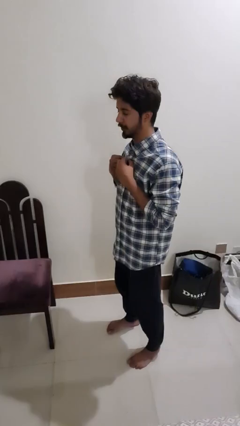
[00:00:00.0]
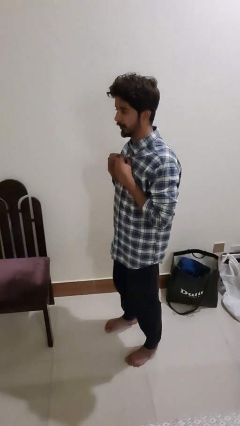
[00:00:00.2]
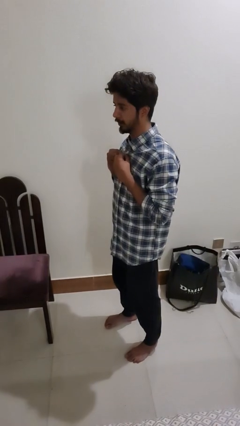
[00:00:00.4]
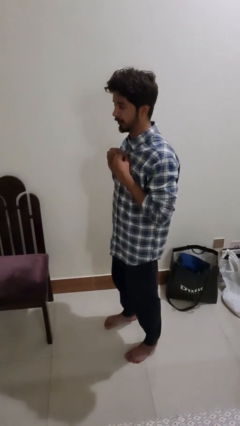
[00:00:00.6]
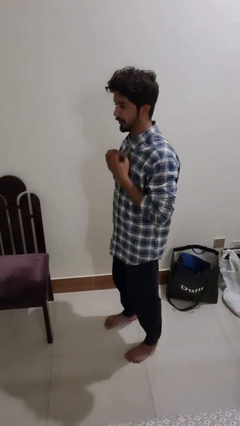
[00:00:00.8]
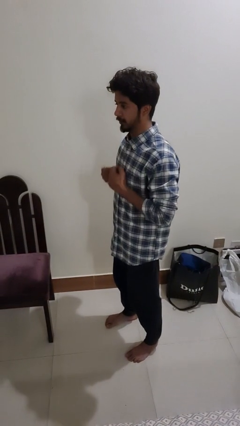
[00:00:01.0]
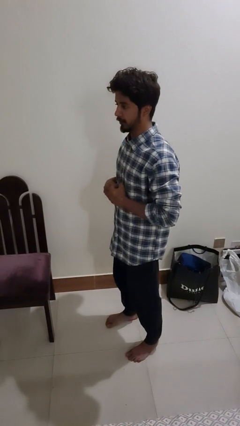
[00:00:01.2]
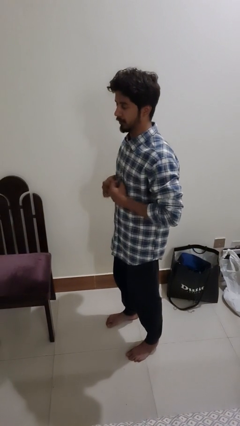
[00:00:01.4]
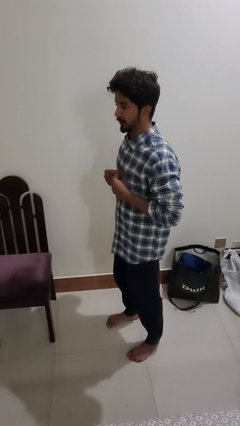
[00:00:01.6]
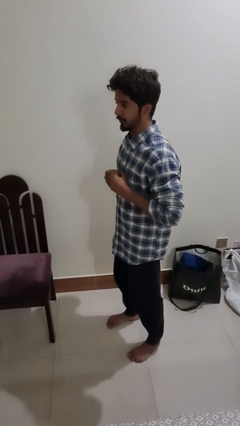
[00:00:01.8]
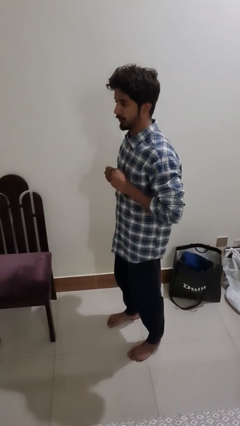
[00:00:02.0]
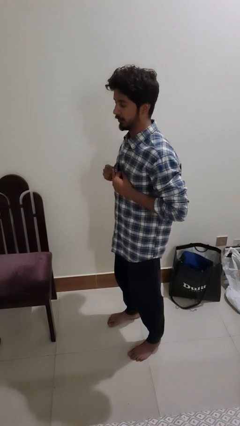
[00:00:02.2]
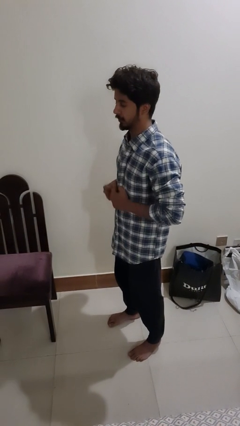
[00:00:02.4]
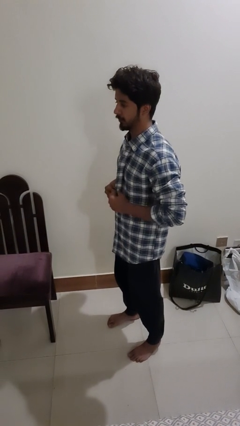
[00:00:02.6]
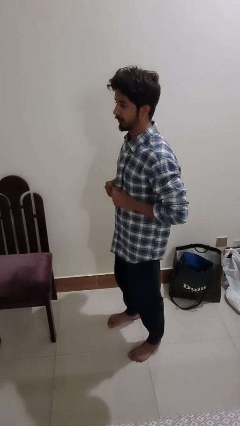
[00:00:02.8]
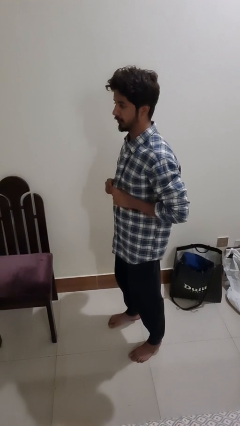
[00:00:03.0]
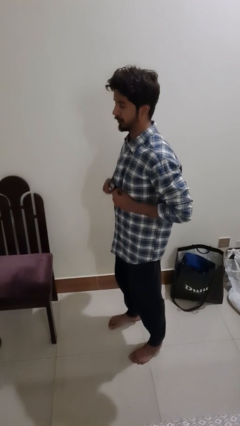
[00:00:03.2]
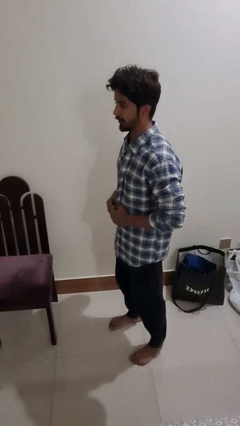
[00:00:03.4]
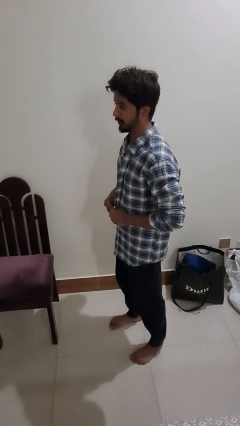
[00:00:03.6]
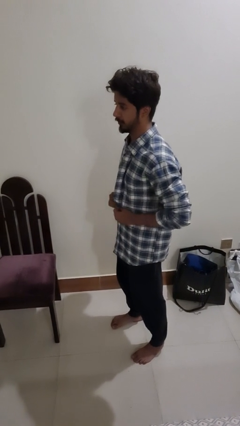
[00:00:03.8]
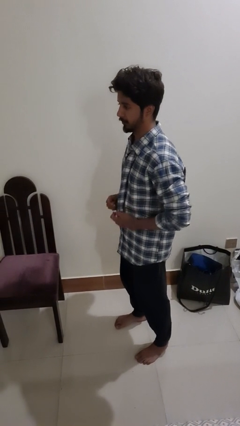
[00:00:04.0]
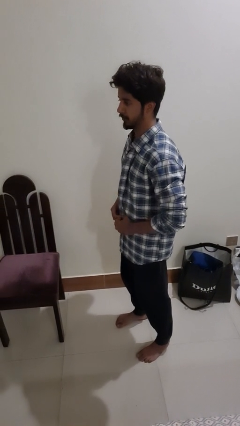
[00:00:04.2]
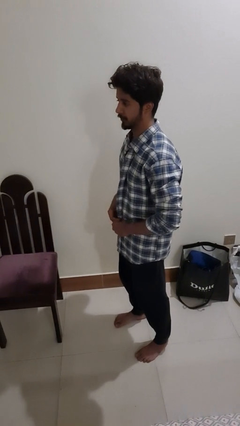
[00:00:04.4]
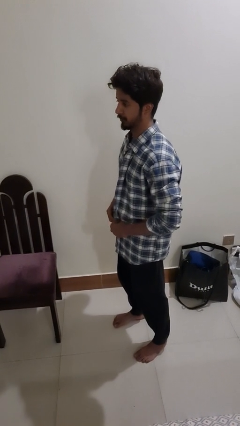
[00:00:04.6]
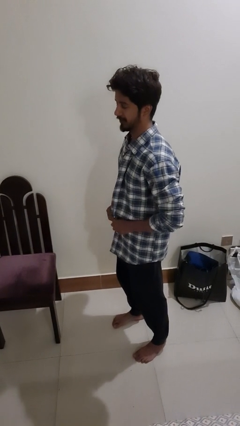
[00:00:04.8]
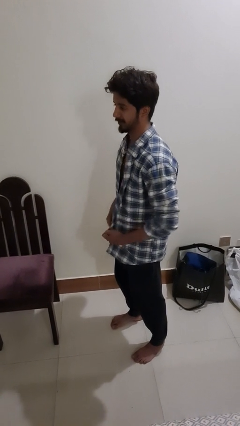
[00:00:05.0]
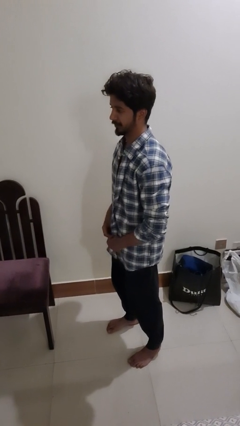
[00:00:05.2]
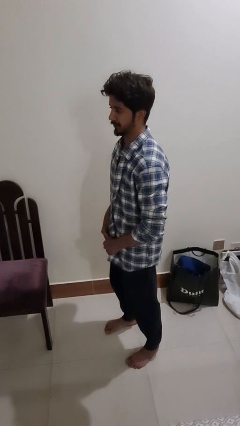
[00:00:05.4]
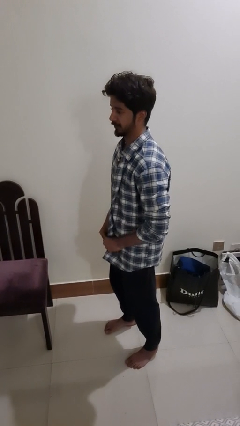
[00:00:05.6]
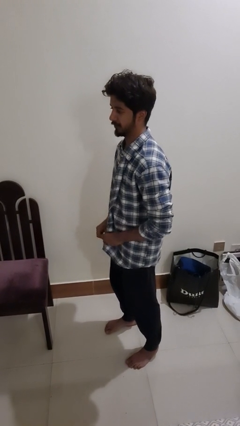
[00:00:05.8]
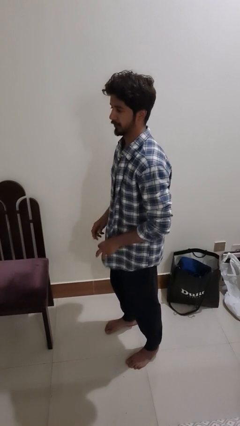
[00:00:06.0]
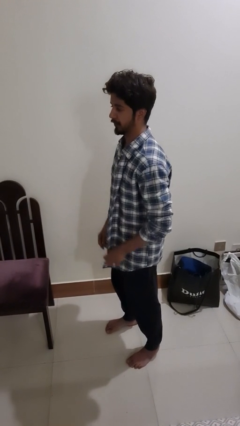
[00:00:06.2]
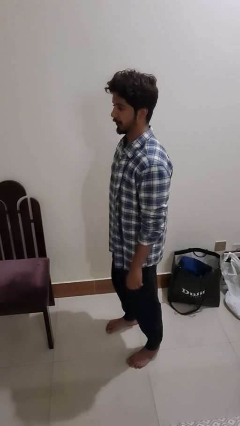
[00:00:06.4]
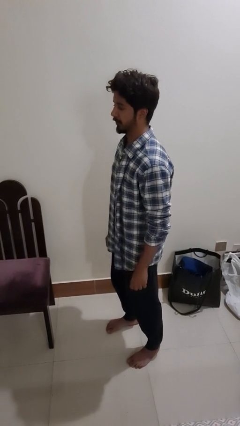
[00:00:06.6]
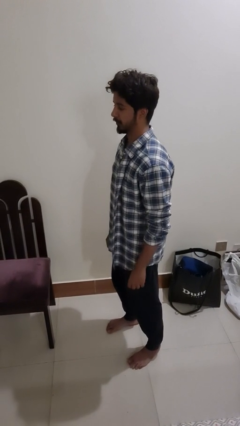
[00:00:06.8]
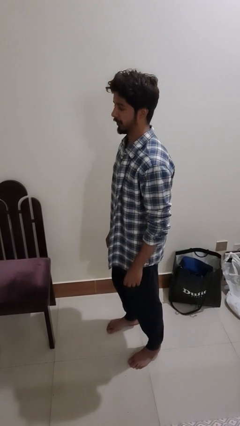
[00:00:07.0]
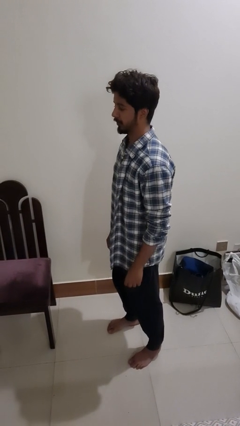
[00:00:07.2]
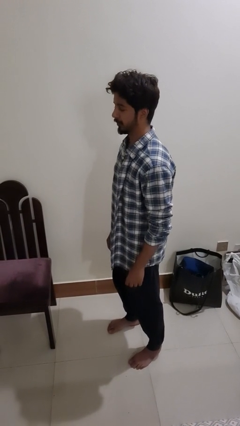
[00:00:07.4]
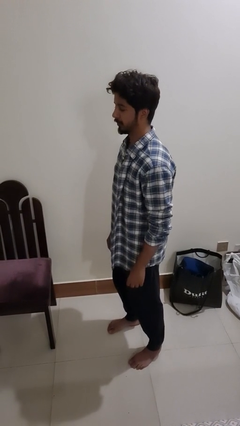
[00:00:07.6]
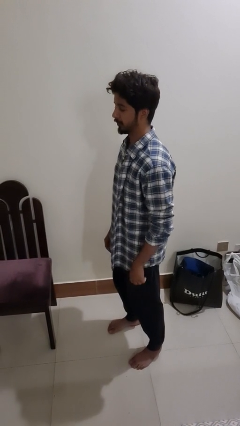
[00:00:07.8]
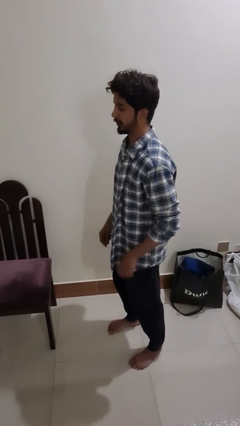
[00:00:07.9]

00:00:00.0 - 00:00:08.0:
person unbuttons shirt

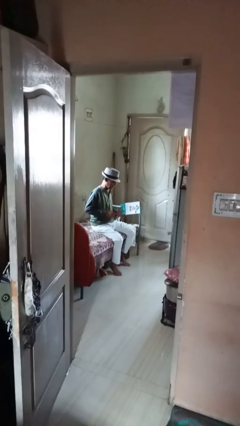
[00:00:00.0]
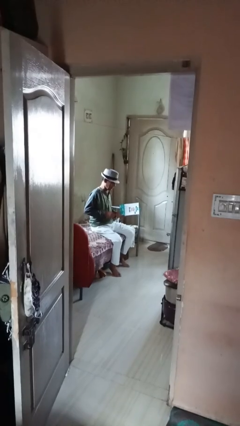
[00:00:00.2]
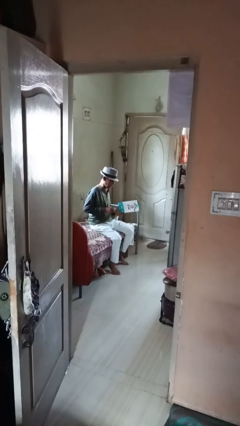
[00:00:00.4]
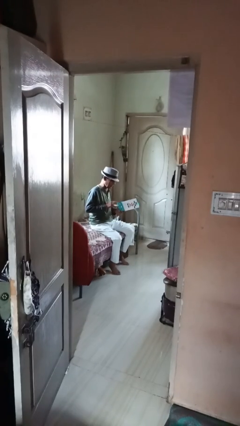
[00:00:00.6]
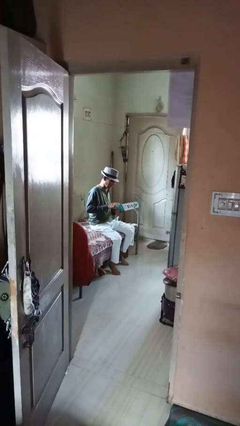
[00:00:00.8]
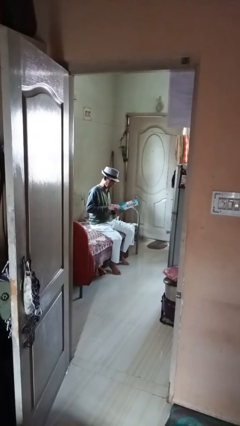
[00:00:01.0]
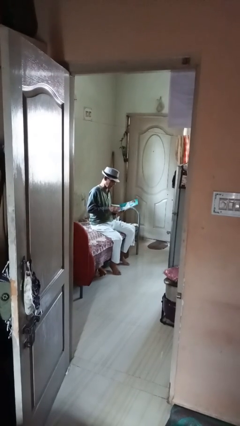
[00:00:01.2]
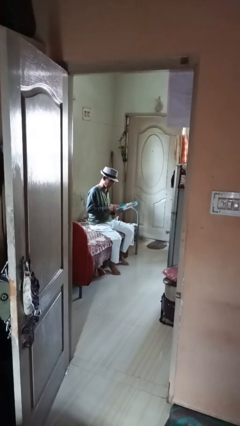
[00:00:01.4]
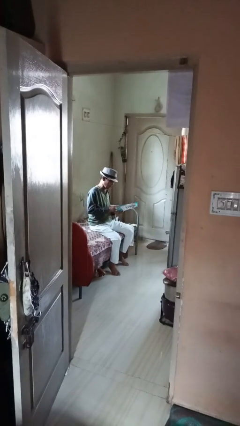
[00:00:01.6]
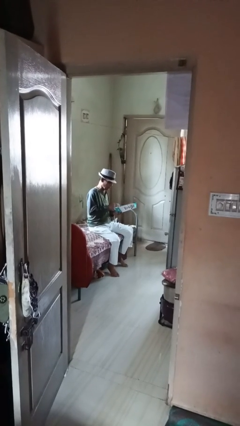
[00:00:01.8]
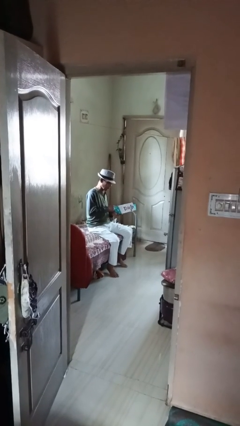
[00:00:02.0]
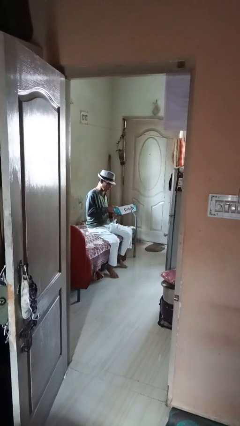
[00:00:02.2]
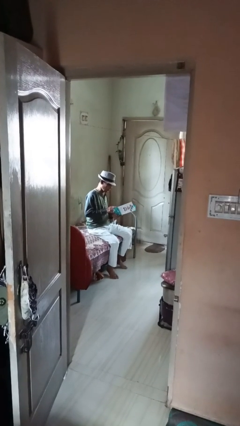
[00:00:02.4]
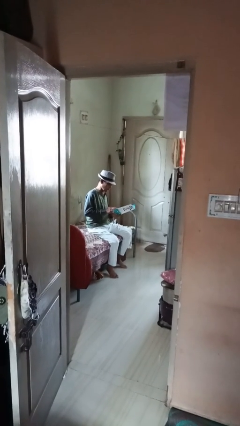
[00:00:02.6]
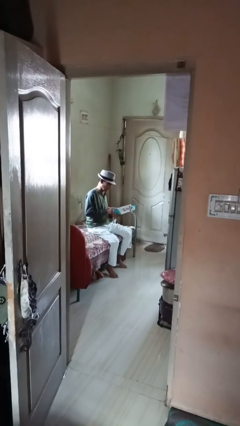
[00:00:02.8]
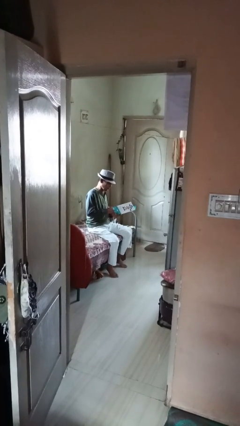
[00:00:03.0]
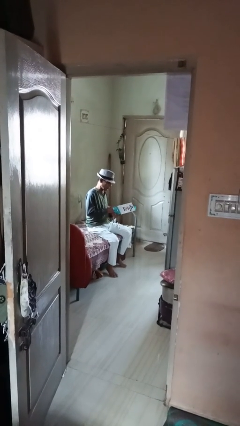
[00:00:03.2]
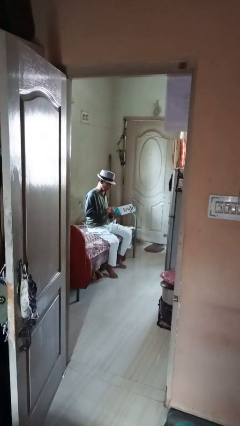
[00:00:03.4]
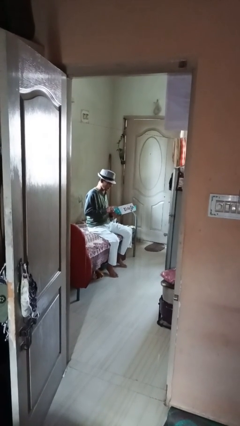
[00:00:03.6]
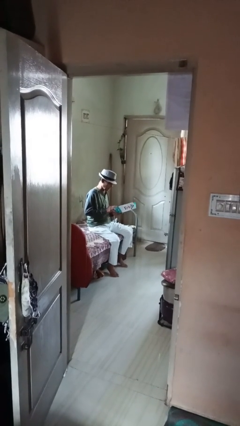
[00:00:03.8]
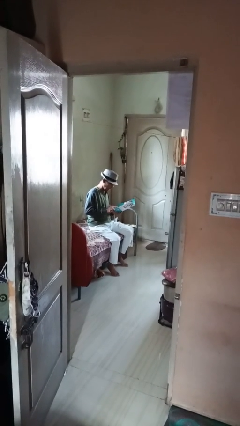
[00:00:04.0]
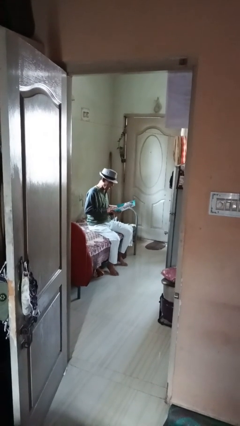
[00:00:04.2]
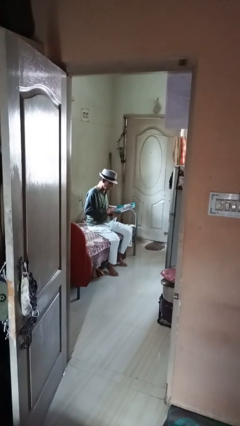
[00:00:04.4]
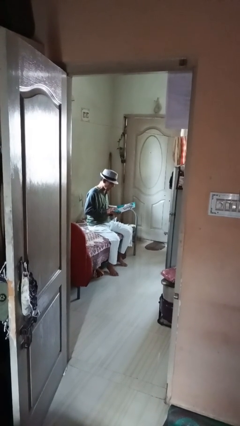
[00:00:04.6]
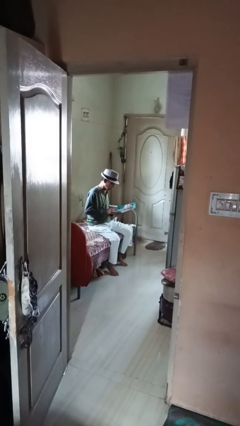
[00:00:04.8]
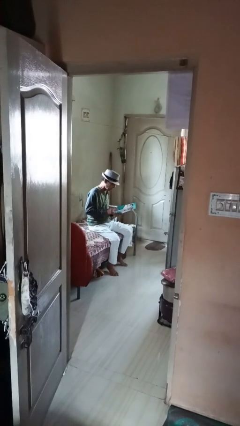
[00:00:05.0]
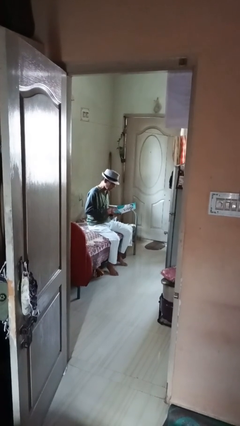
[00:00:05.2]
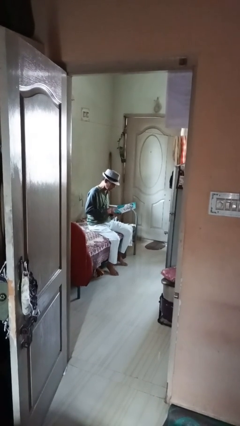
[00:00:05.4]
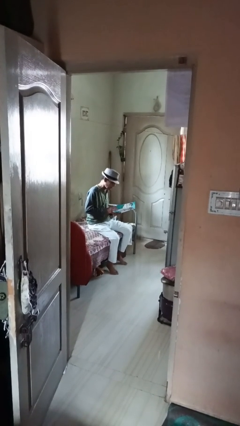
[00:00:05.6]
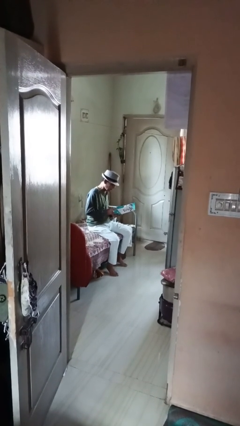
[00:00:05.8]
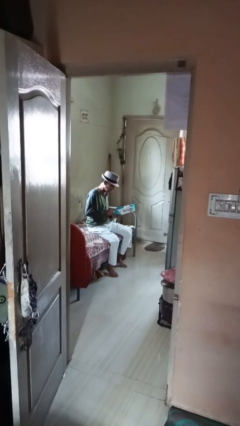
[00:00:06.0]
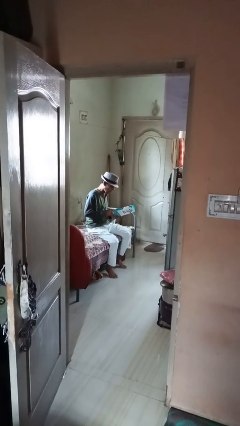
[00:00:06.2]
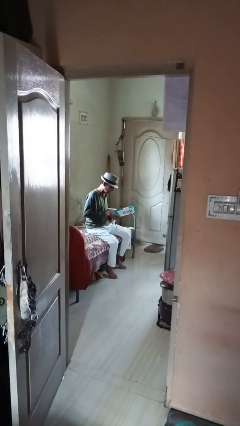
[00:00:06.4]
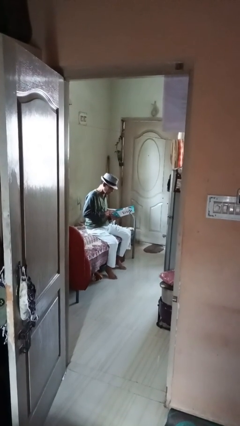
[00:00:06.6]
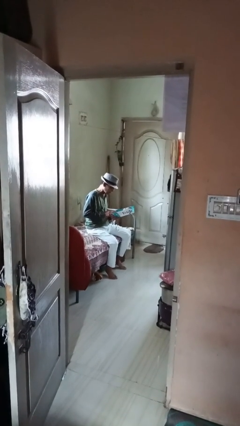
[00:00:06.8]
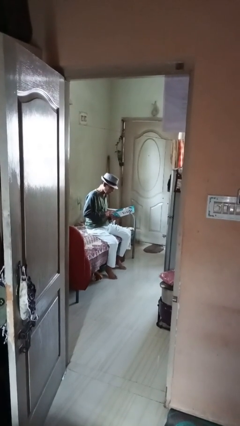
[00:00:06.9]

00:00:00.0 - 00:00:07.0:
person reads magazine

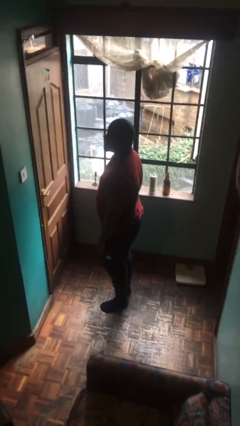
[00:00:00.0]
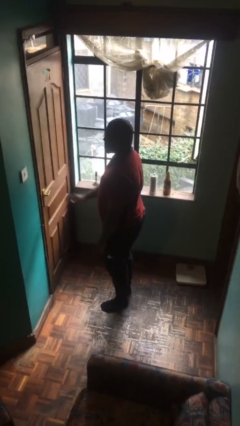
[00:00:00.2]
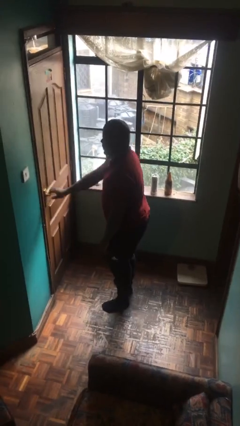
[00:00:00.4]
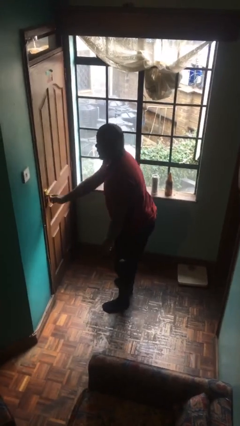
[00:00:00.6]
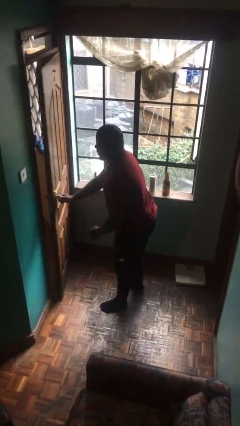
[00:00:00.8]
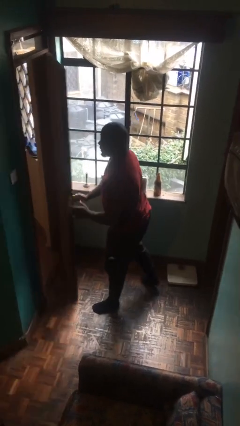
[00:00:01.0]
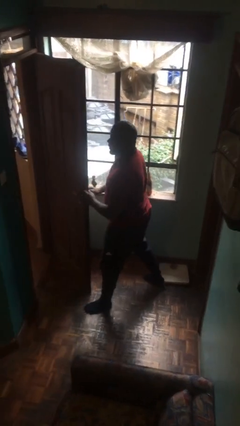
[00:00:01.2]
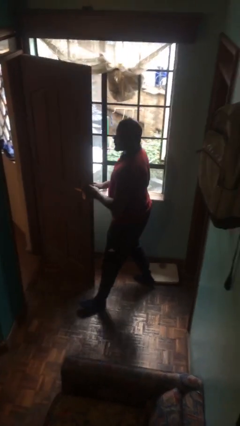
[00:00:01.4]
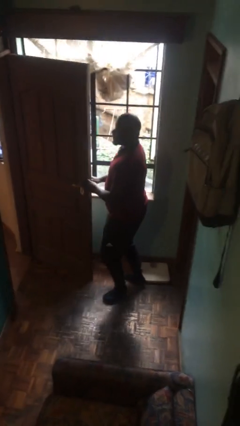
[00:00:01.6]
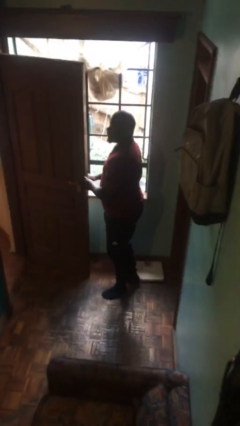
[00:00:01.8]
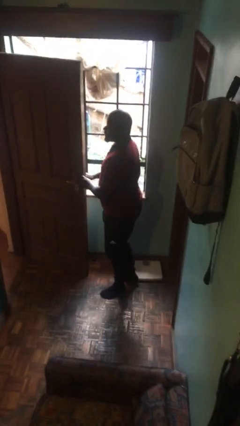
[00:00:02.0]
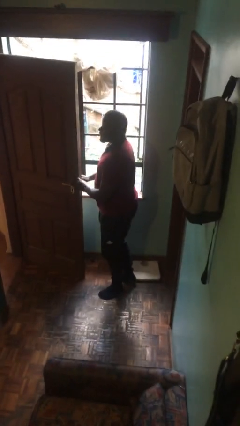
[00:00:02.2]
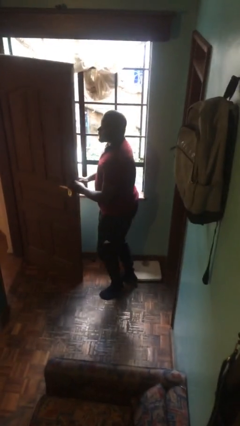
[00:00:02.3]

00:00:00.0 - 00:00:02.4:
person opens facility door

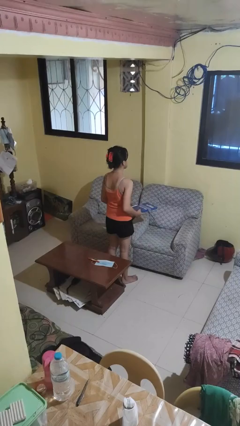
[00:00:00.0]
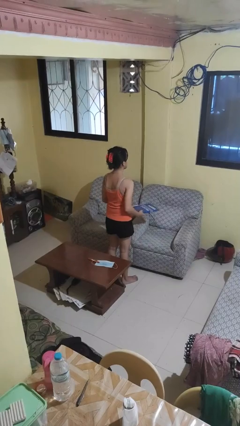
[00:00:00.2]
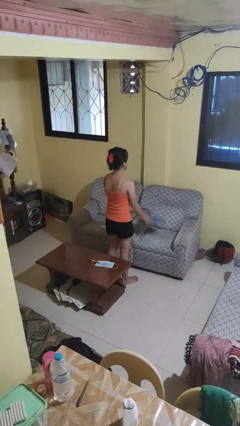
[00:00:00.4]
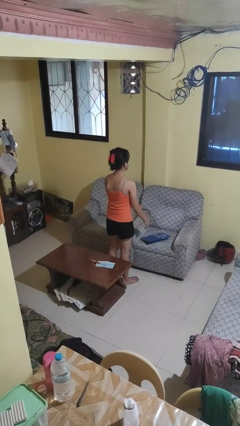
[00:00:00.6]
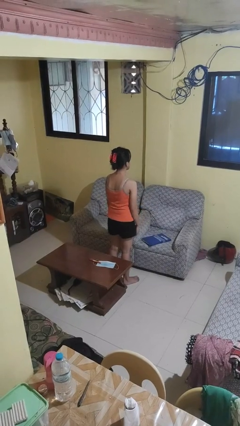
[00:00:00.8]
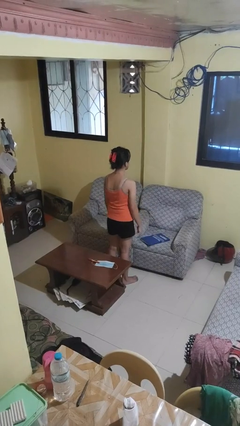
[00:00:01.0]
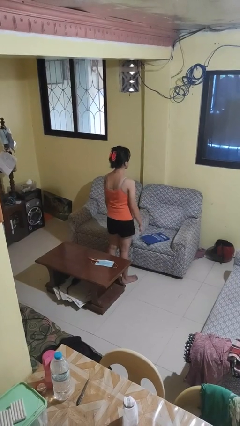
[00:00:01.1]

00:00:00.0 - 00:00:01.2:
person puts down object on couch
